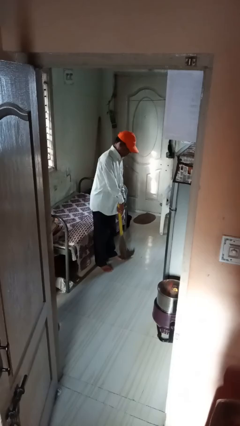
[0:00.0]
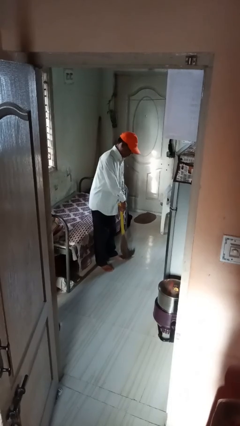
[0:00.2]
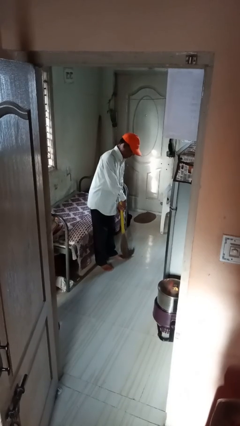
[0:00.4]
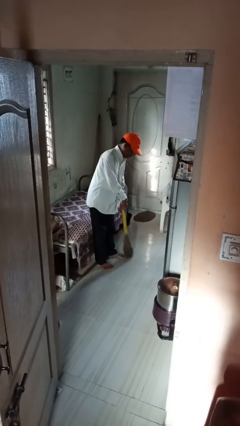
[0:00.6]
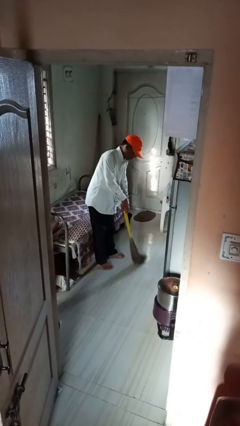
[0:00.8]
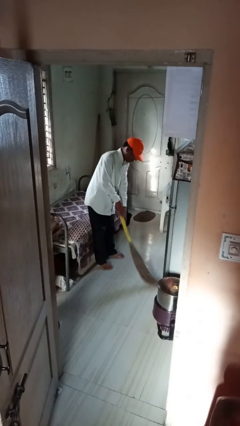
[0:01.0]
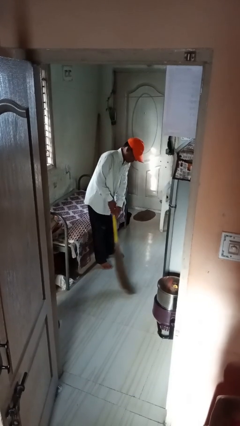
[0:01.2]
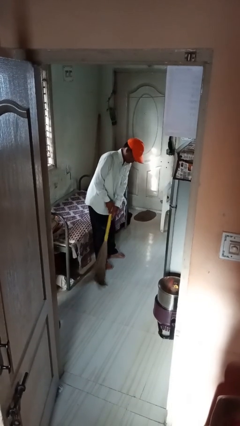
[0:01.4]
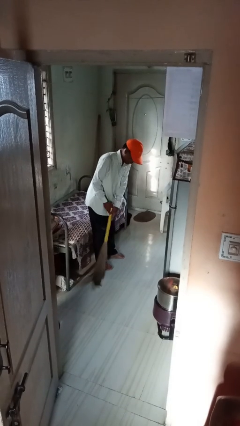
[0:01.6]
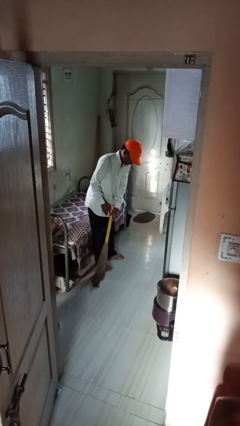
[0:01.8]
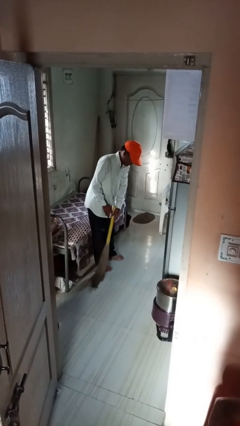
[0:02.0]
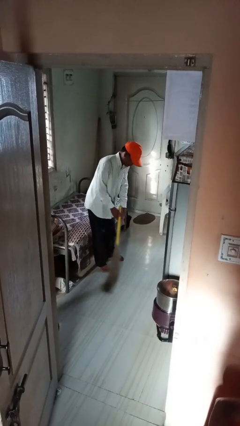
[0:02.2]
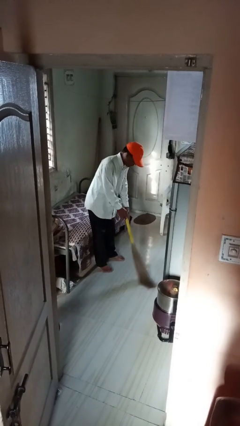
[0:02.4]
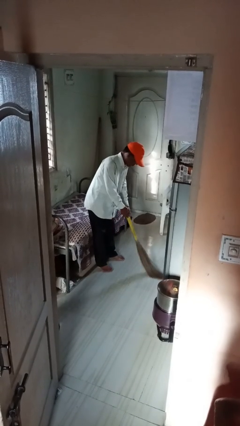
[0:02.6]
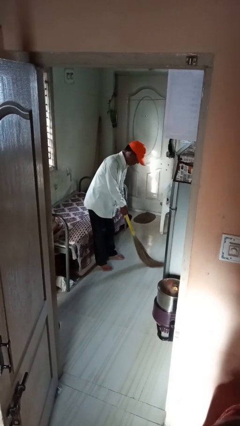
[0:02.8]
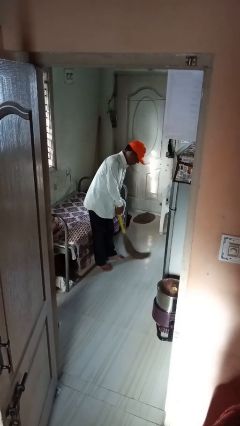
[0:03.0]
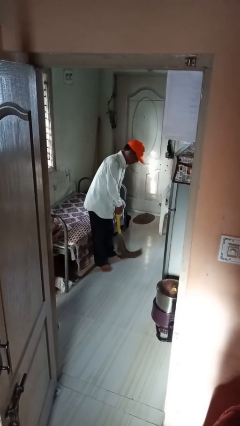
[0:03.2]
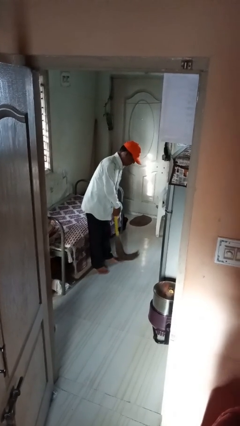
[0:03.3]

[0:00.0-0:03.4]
person sweeps floor

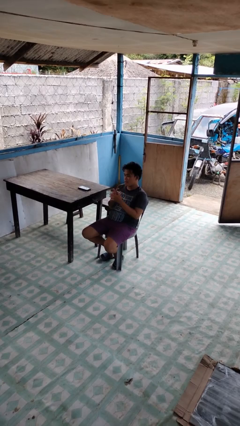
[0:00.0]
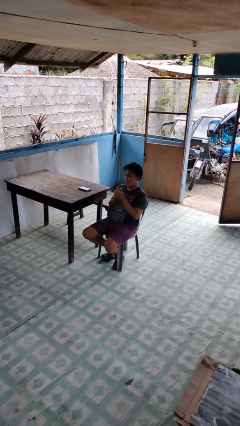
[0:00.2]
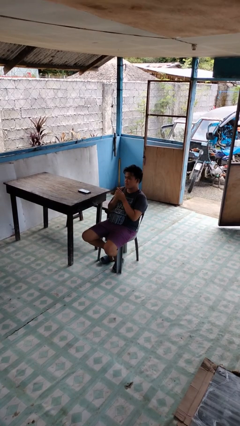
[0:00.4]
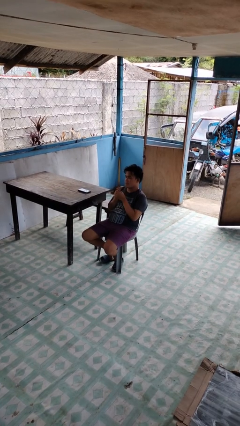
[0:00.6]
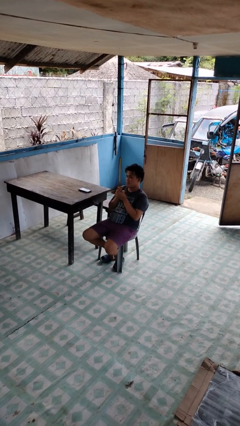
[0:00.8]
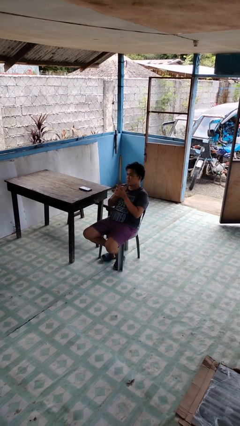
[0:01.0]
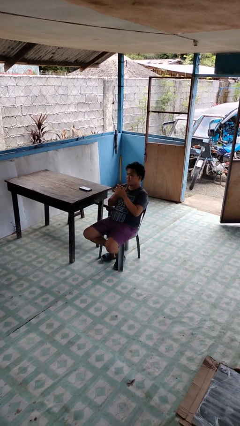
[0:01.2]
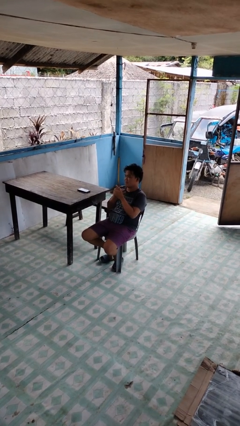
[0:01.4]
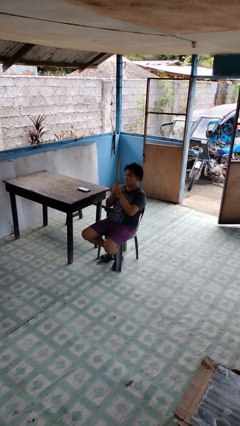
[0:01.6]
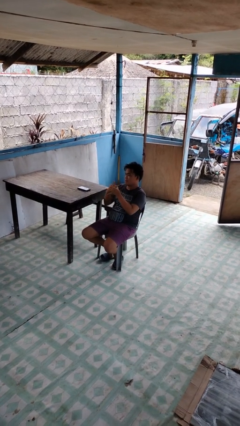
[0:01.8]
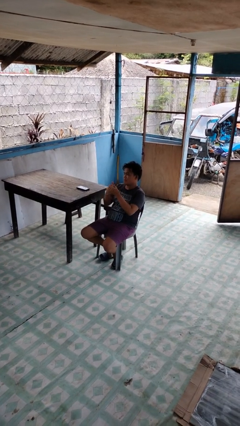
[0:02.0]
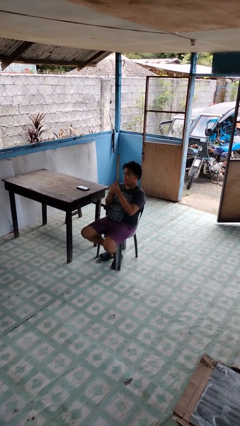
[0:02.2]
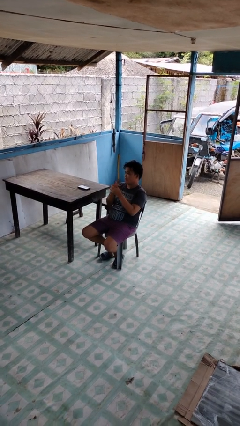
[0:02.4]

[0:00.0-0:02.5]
person cracks knuckles

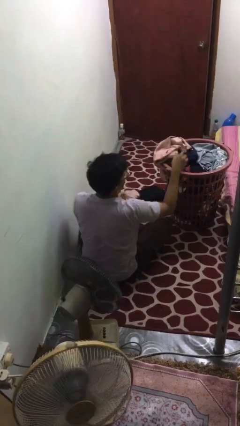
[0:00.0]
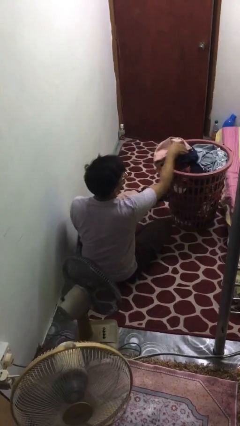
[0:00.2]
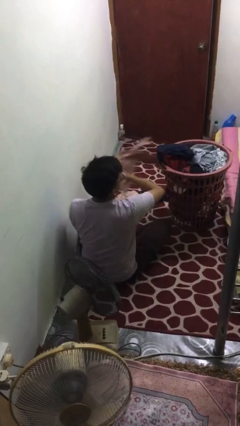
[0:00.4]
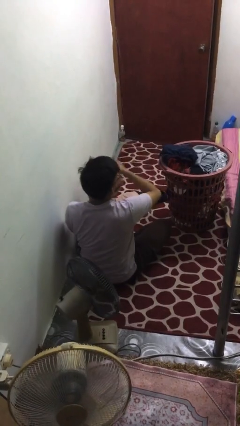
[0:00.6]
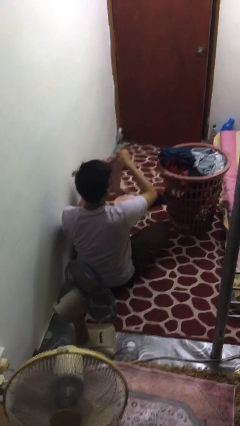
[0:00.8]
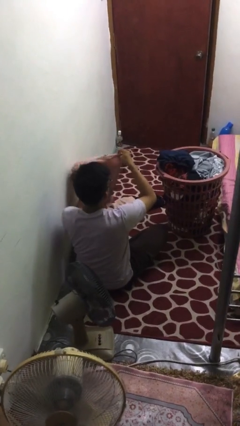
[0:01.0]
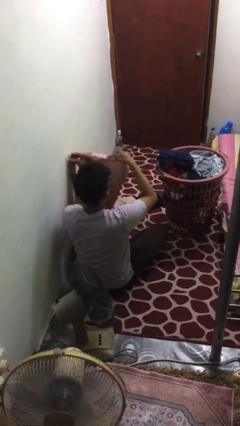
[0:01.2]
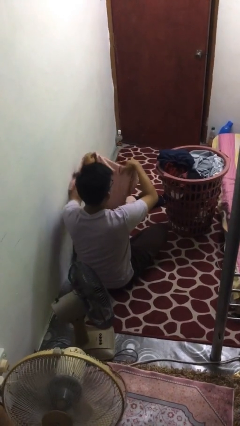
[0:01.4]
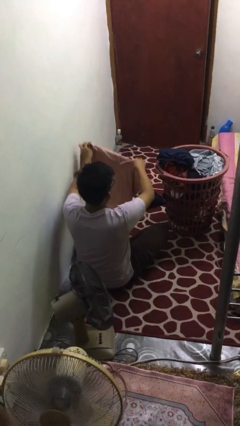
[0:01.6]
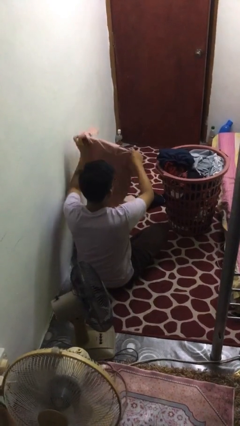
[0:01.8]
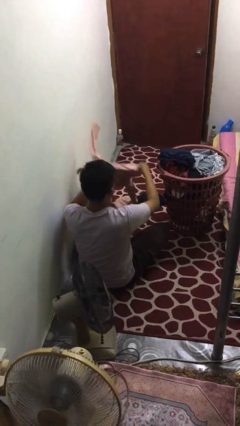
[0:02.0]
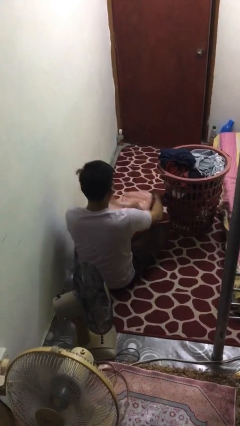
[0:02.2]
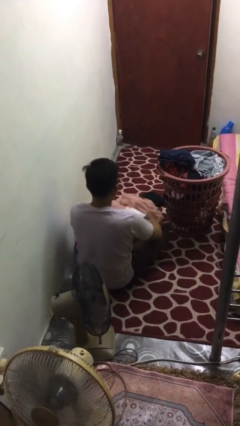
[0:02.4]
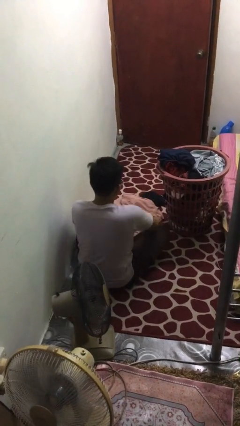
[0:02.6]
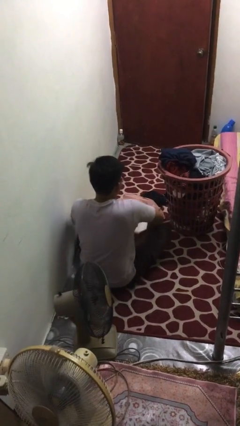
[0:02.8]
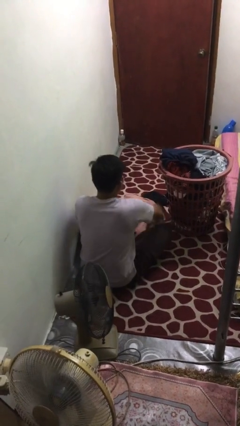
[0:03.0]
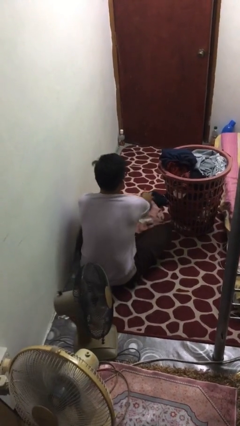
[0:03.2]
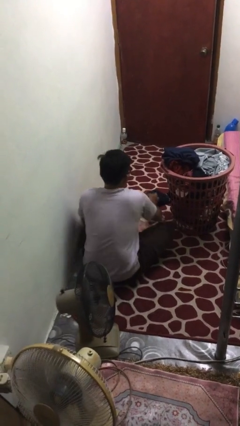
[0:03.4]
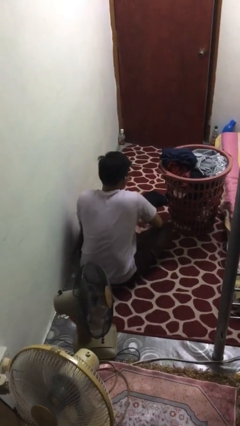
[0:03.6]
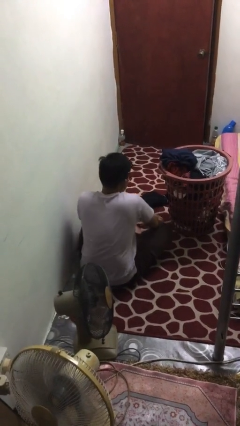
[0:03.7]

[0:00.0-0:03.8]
person folds shirt

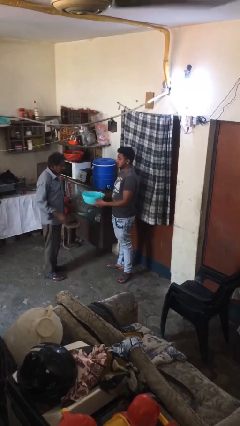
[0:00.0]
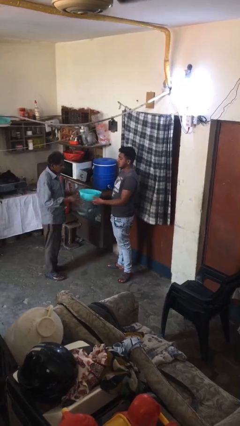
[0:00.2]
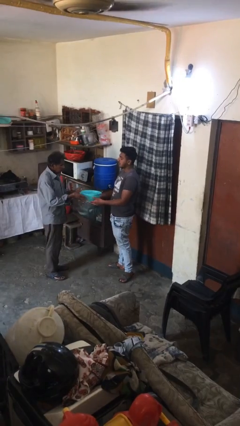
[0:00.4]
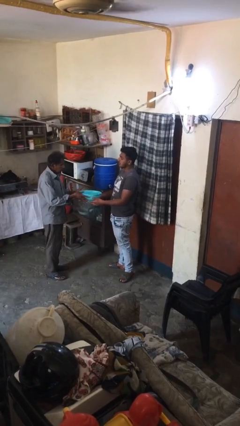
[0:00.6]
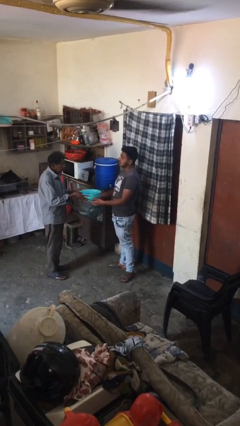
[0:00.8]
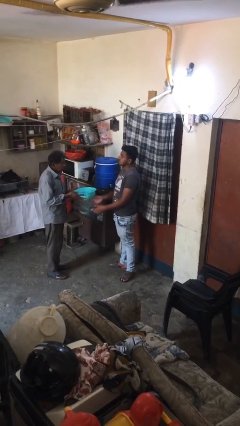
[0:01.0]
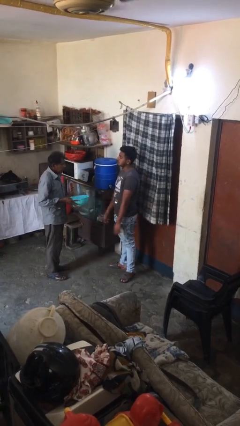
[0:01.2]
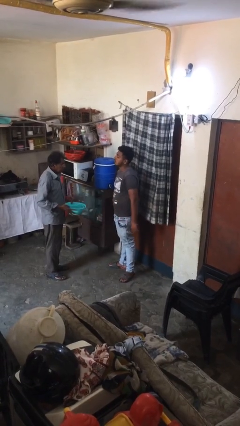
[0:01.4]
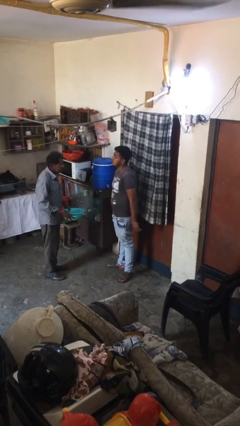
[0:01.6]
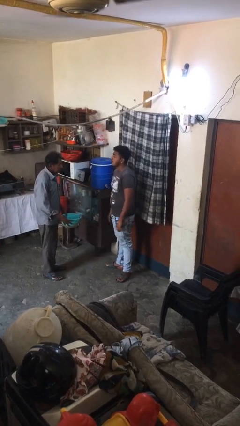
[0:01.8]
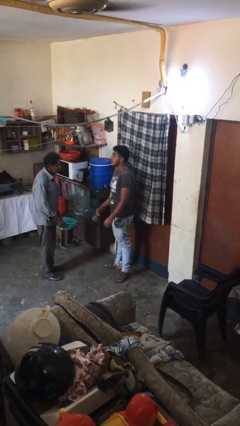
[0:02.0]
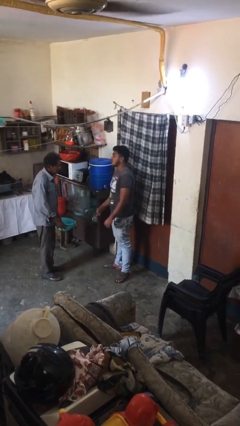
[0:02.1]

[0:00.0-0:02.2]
person transfers object to person

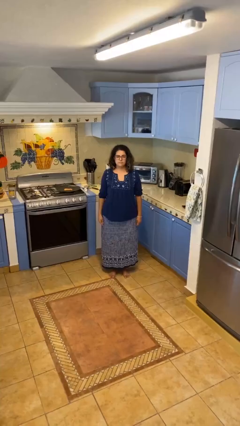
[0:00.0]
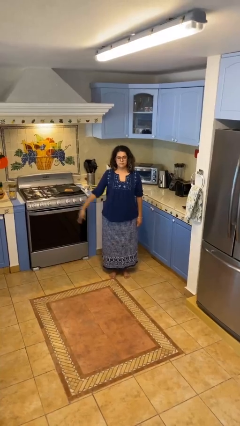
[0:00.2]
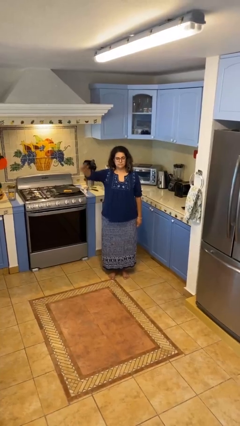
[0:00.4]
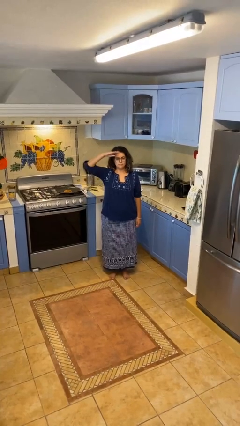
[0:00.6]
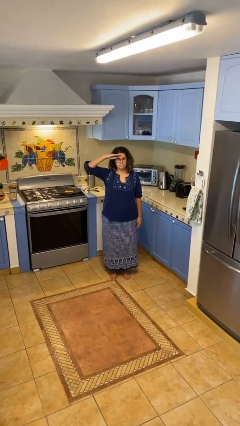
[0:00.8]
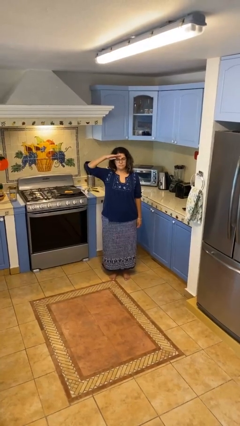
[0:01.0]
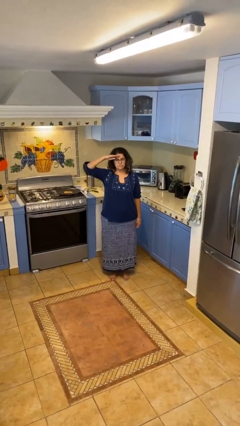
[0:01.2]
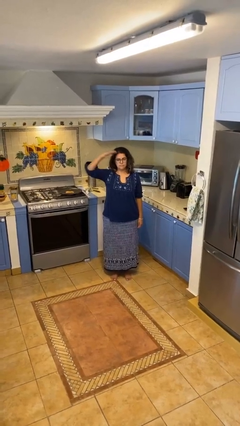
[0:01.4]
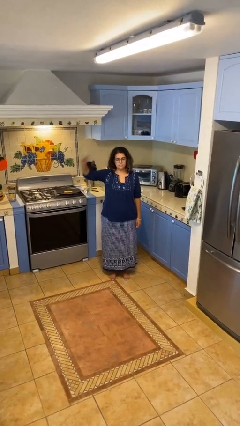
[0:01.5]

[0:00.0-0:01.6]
person salutes

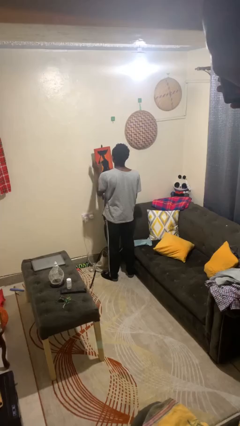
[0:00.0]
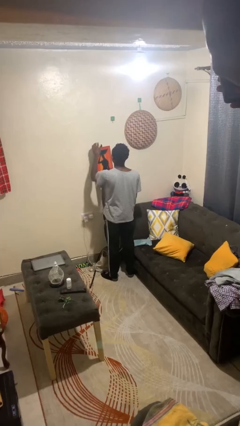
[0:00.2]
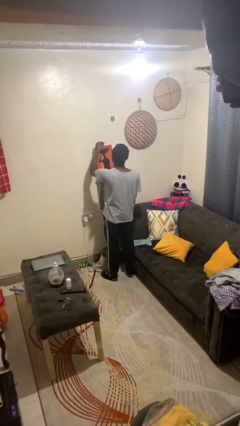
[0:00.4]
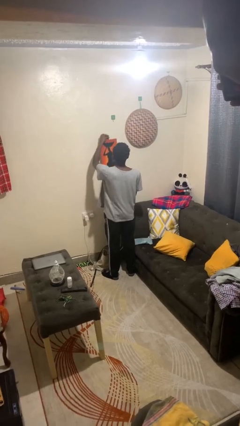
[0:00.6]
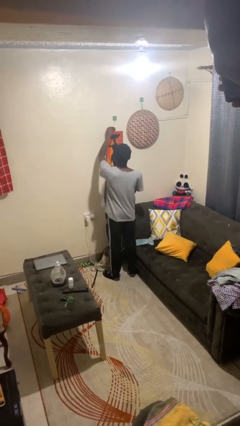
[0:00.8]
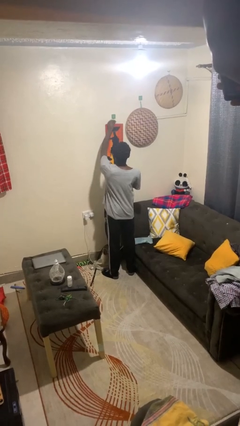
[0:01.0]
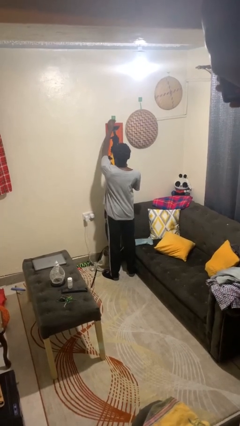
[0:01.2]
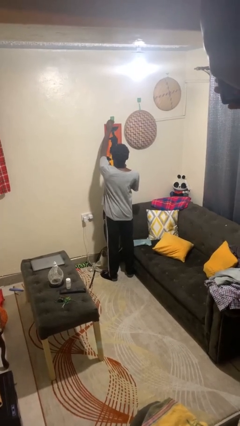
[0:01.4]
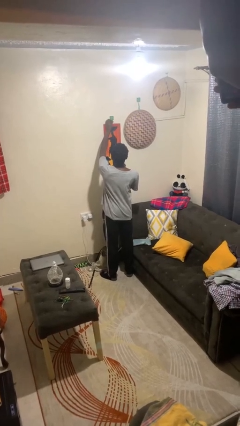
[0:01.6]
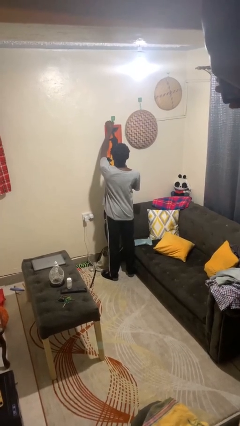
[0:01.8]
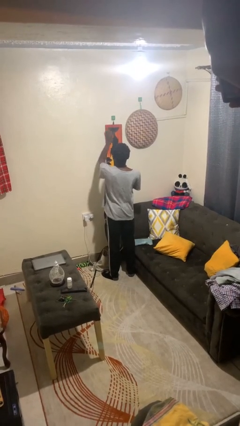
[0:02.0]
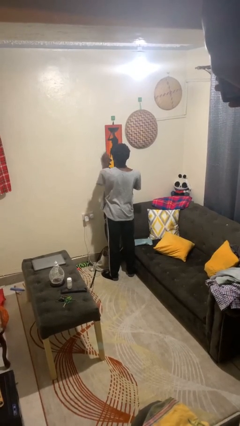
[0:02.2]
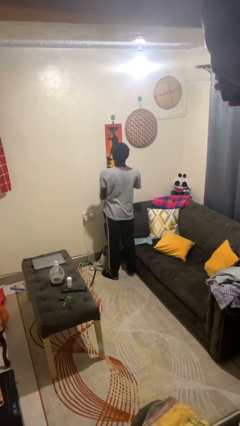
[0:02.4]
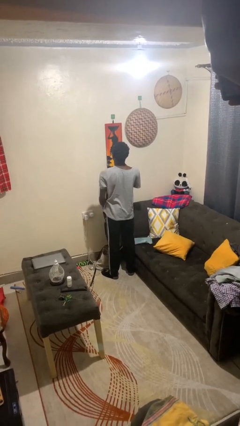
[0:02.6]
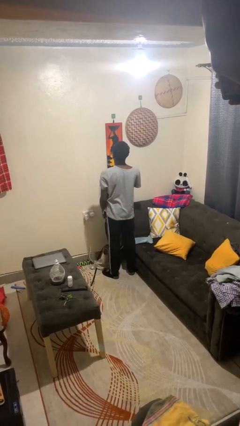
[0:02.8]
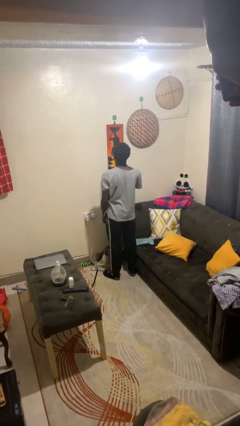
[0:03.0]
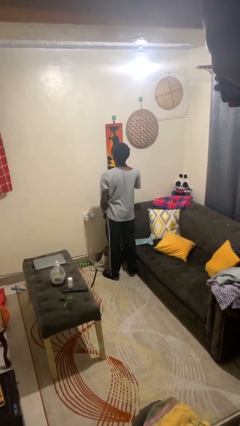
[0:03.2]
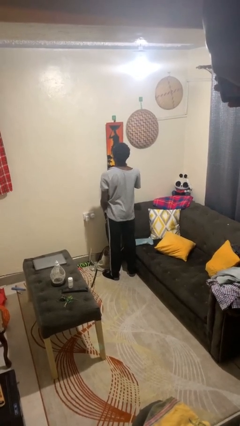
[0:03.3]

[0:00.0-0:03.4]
person puts up picture frame

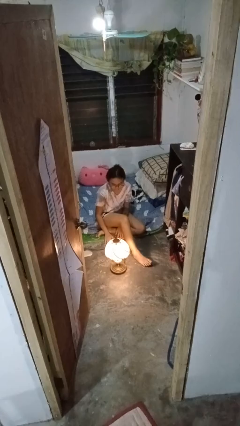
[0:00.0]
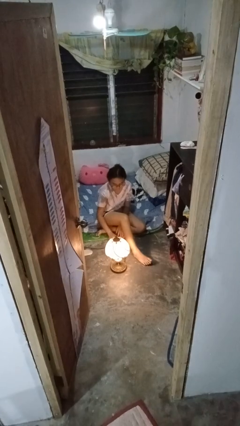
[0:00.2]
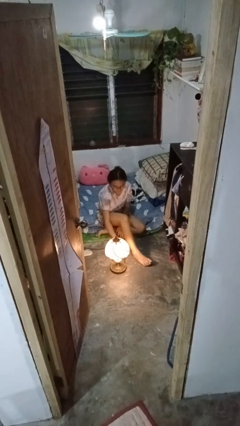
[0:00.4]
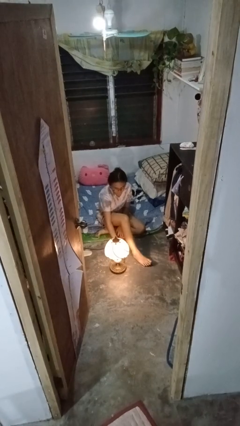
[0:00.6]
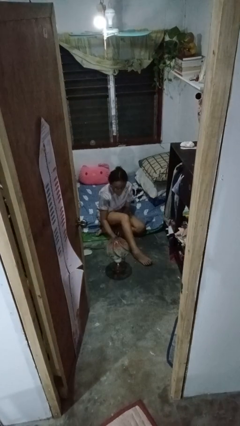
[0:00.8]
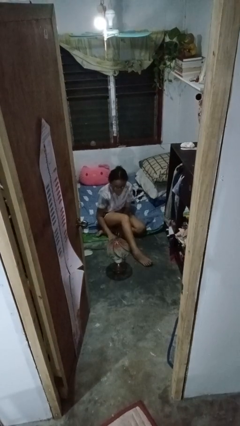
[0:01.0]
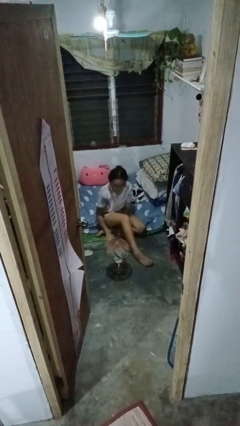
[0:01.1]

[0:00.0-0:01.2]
person turns off lamp
